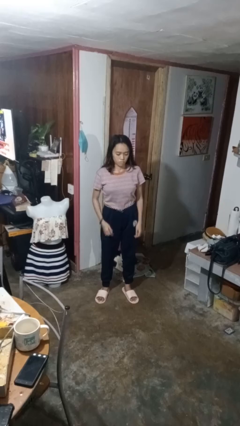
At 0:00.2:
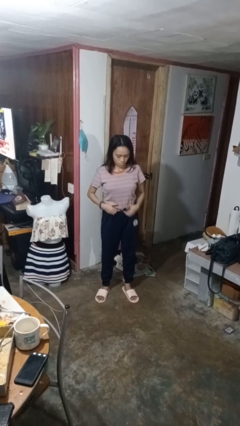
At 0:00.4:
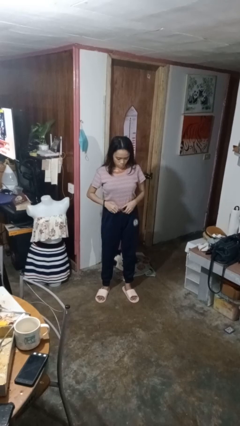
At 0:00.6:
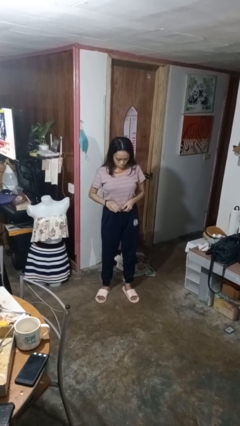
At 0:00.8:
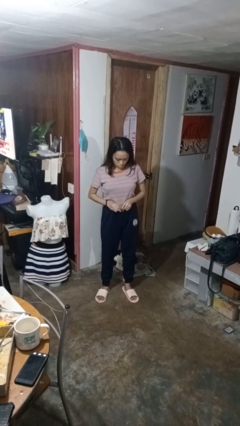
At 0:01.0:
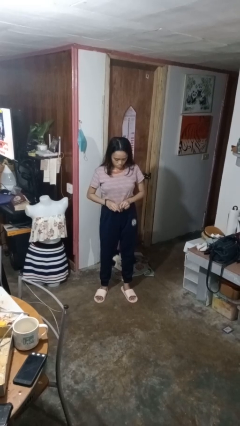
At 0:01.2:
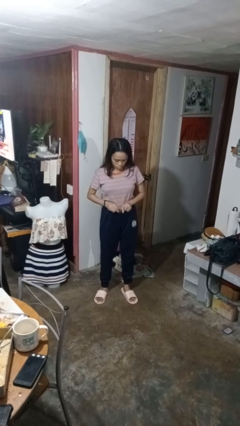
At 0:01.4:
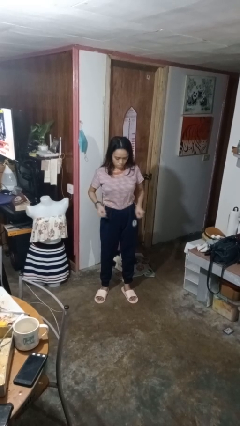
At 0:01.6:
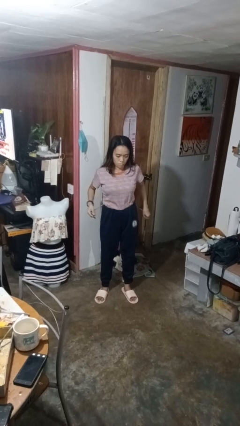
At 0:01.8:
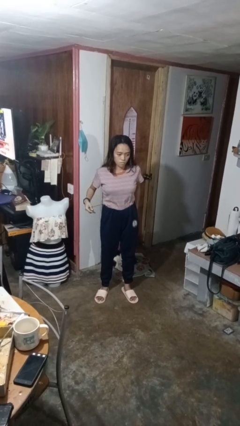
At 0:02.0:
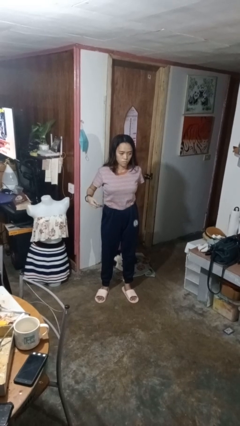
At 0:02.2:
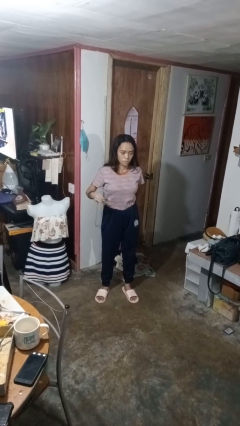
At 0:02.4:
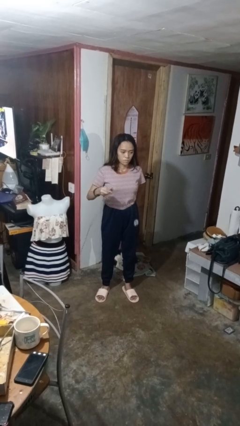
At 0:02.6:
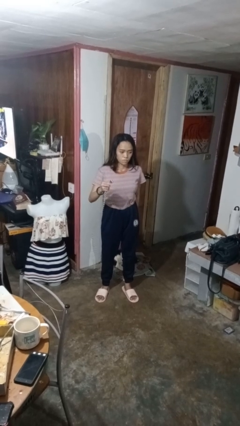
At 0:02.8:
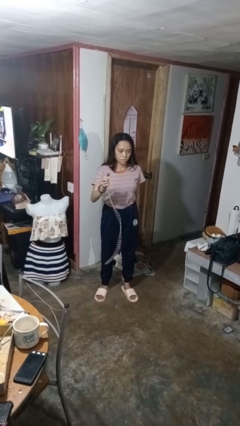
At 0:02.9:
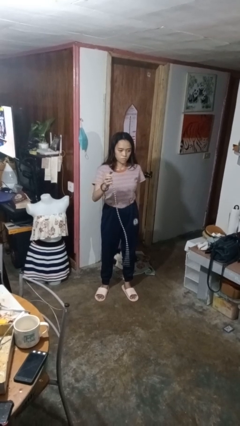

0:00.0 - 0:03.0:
person takes off belt

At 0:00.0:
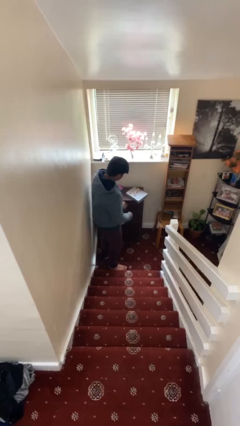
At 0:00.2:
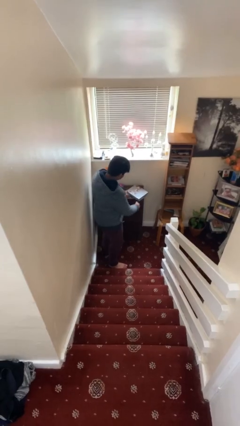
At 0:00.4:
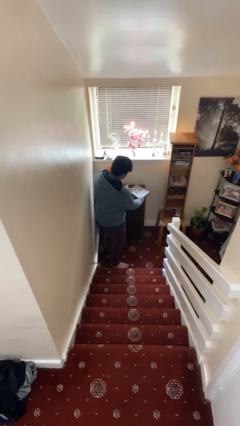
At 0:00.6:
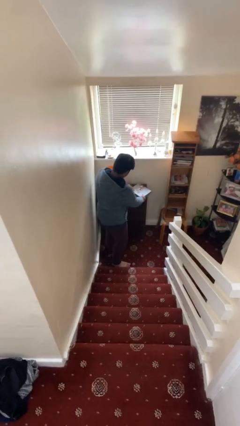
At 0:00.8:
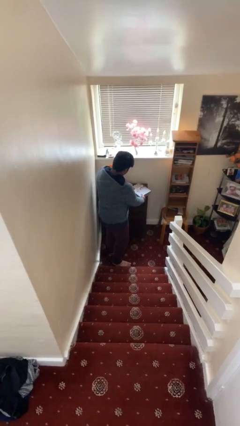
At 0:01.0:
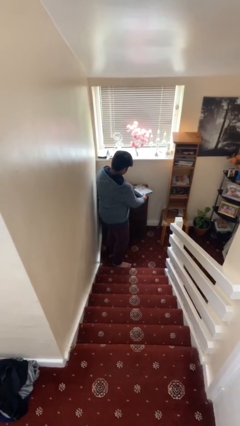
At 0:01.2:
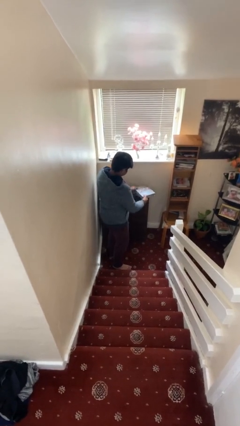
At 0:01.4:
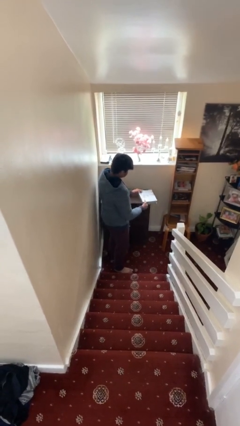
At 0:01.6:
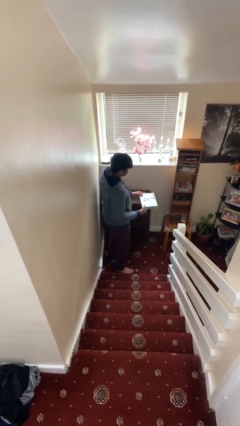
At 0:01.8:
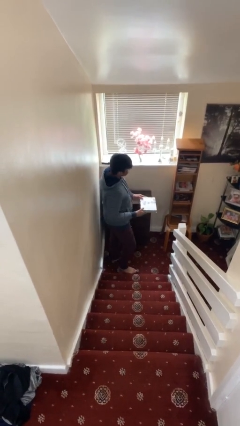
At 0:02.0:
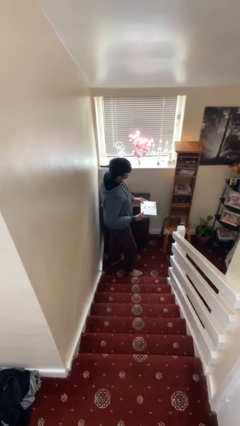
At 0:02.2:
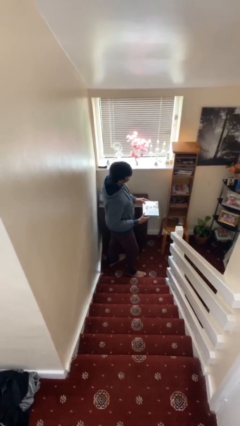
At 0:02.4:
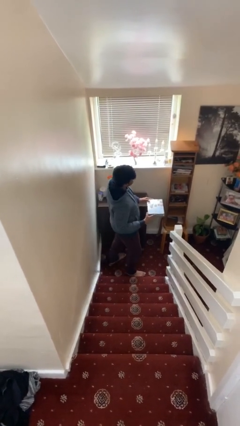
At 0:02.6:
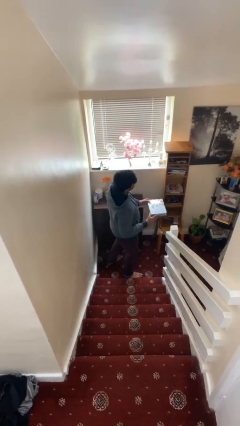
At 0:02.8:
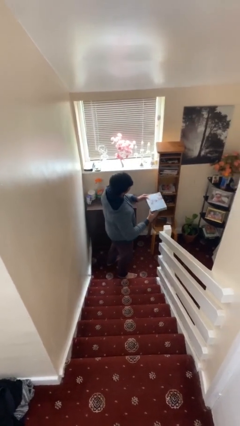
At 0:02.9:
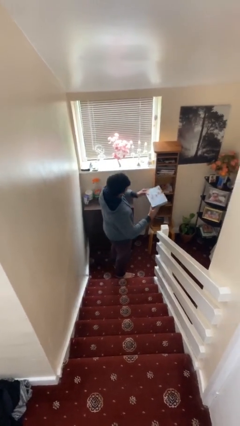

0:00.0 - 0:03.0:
person picks up object from table

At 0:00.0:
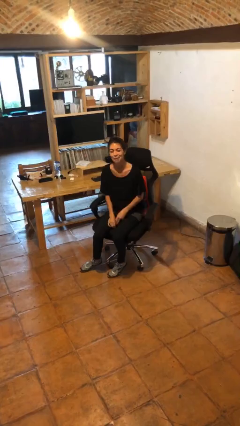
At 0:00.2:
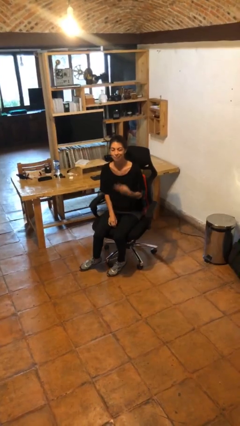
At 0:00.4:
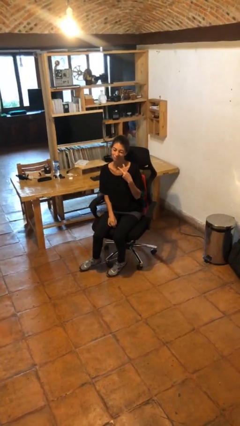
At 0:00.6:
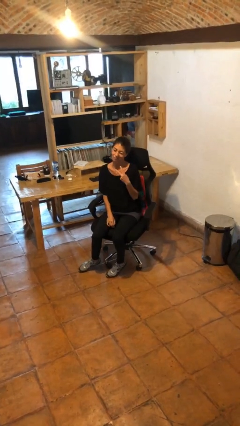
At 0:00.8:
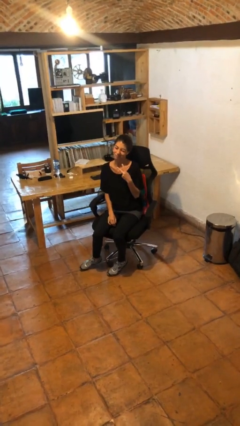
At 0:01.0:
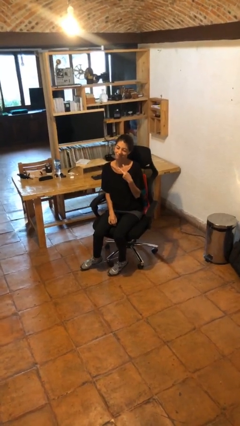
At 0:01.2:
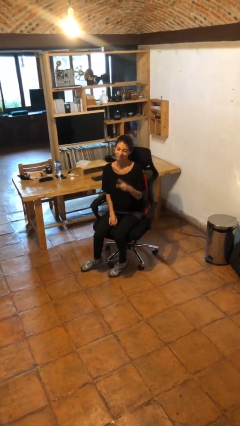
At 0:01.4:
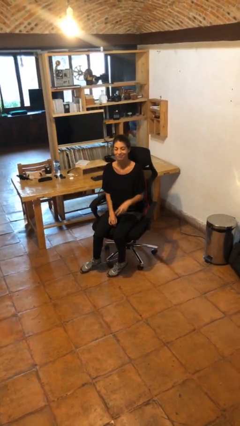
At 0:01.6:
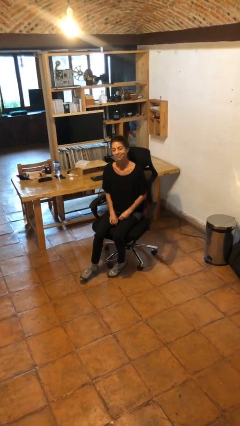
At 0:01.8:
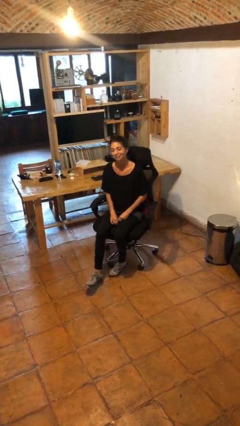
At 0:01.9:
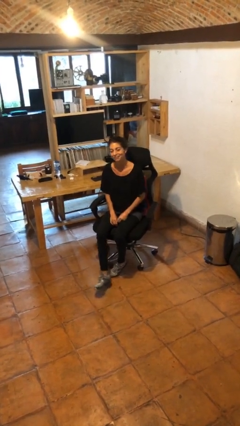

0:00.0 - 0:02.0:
person gestures peace

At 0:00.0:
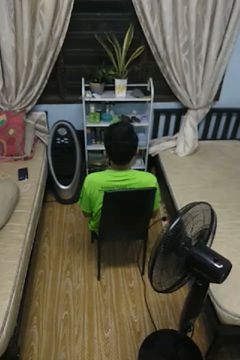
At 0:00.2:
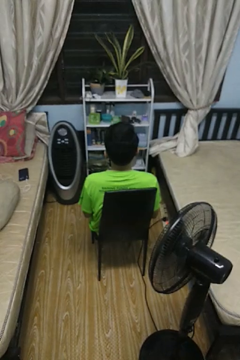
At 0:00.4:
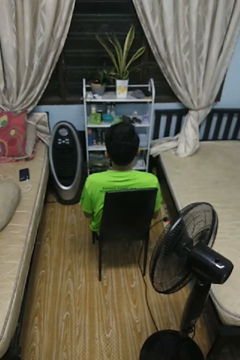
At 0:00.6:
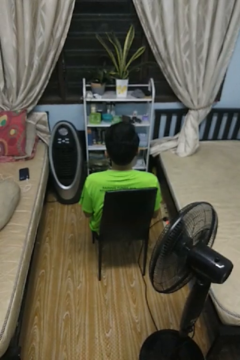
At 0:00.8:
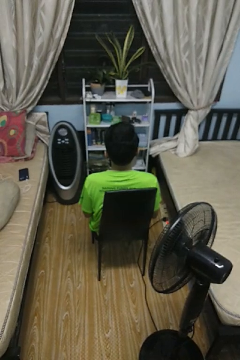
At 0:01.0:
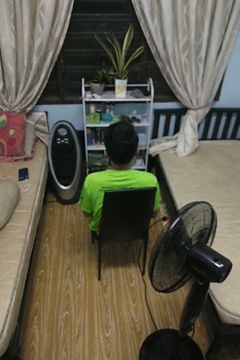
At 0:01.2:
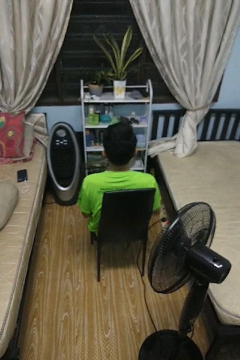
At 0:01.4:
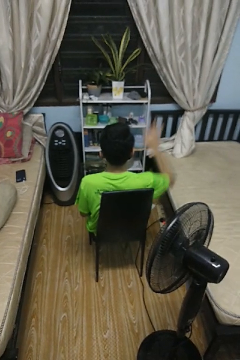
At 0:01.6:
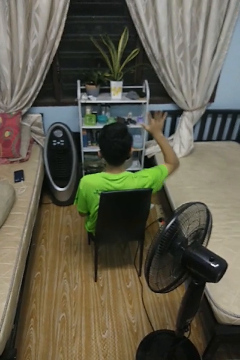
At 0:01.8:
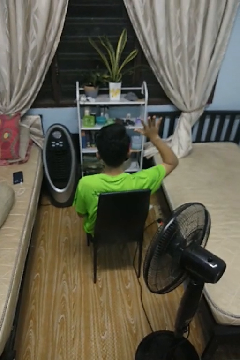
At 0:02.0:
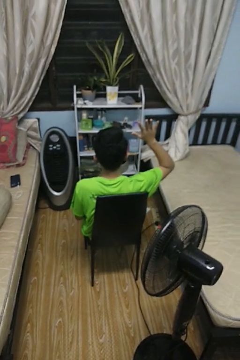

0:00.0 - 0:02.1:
person gestures number five

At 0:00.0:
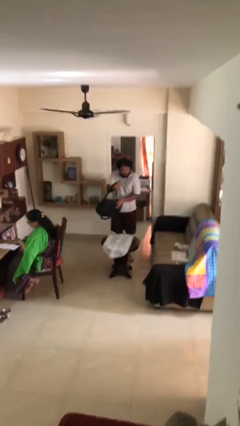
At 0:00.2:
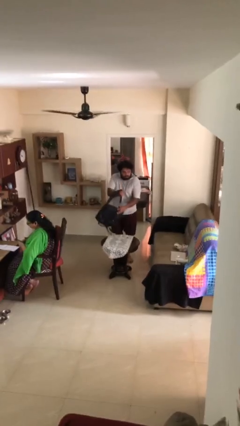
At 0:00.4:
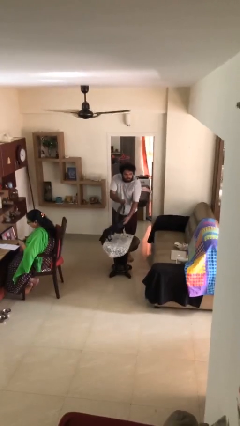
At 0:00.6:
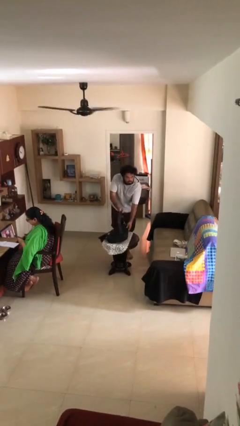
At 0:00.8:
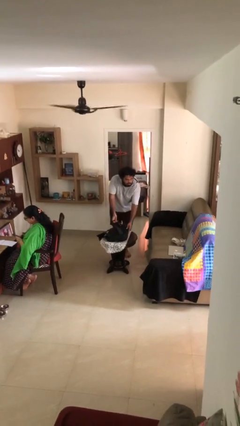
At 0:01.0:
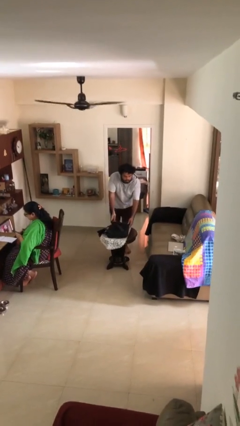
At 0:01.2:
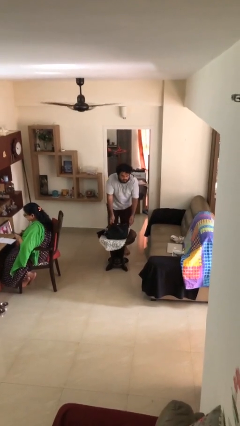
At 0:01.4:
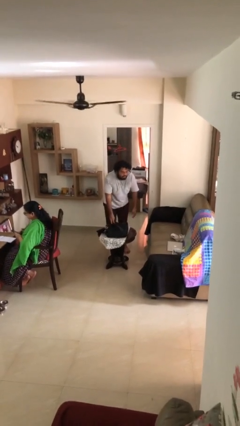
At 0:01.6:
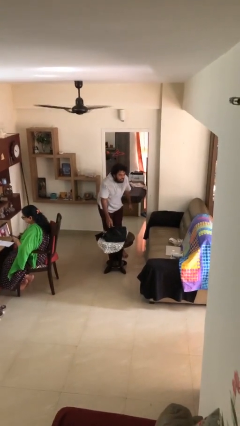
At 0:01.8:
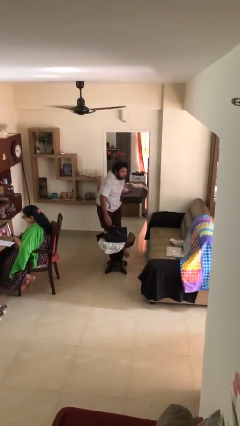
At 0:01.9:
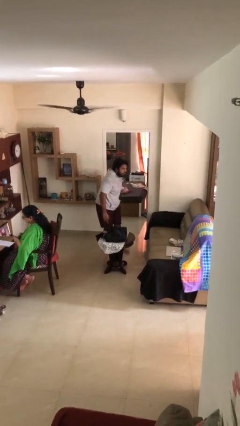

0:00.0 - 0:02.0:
person puts down object on table

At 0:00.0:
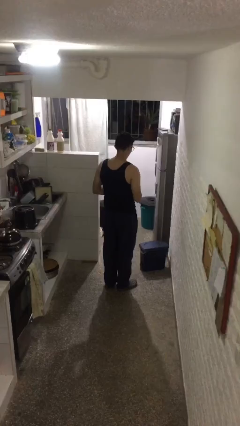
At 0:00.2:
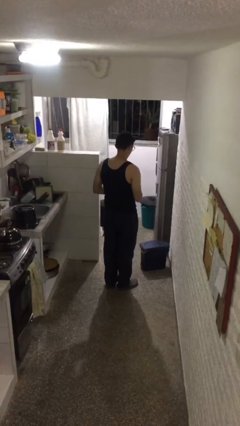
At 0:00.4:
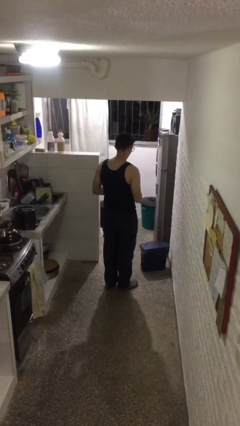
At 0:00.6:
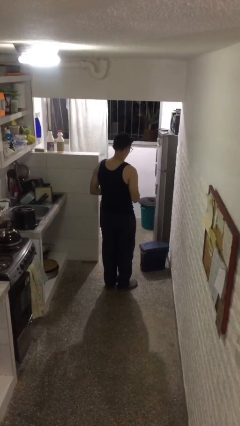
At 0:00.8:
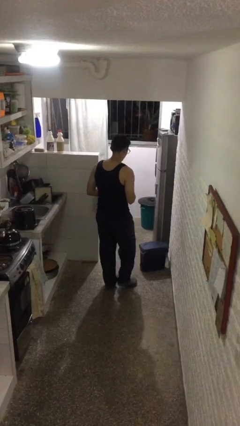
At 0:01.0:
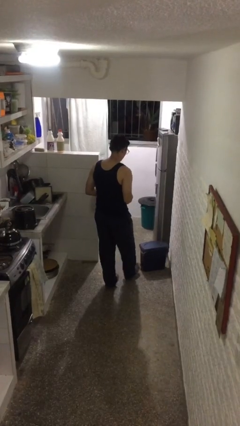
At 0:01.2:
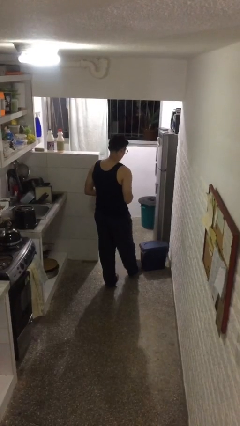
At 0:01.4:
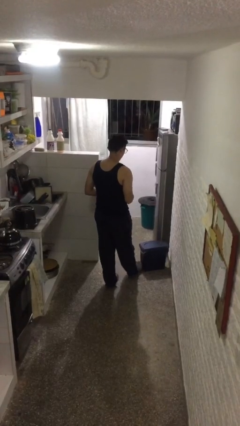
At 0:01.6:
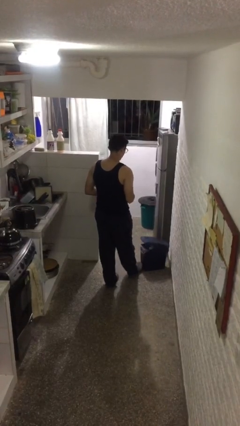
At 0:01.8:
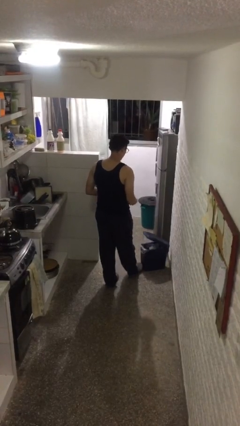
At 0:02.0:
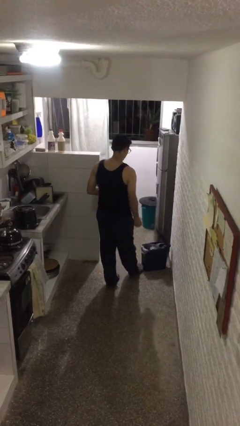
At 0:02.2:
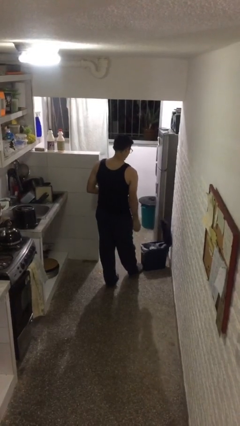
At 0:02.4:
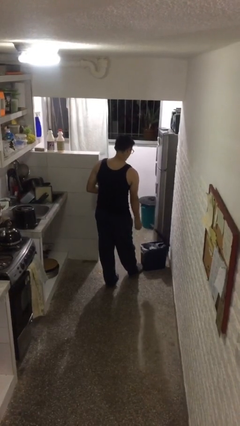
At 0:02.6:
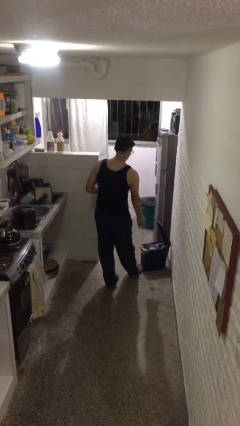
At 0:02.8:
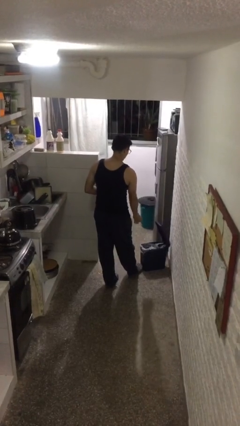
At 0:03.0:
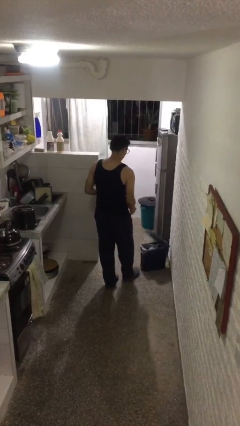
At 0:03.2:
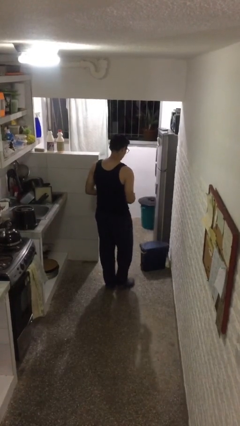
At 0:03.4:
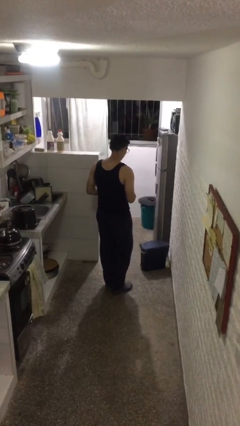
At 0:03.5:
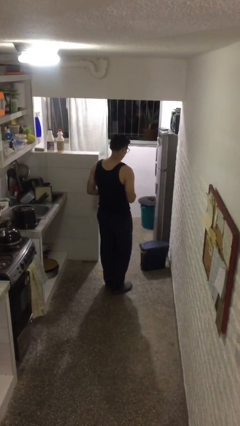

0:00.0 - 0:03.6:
person discards trash

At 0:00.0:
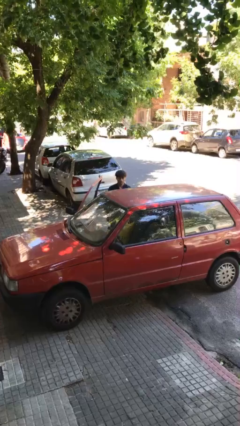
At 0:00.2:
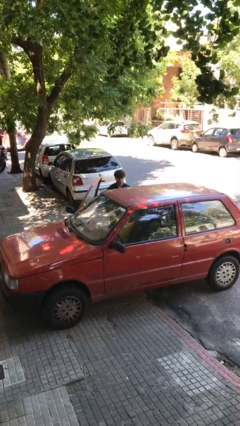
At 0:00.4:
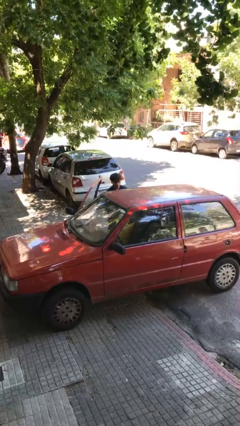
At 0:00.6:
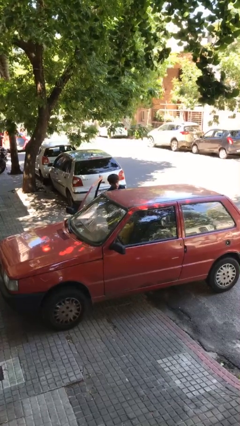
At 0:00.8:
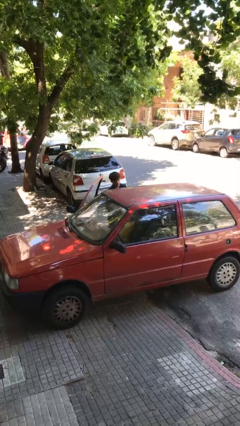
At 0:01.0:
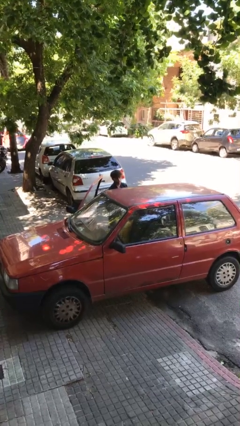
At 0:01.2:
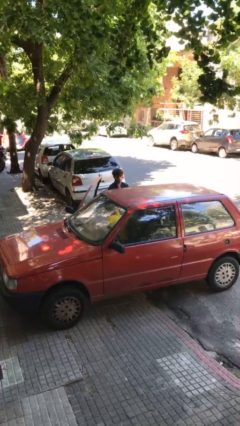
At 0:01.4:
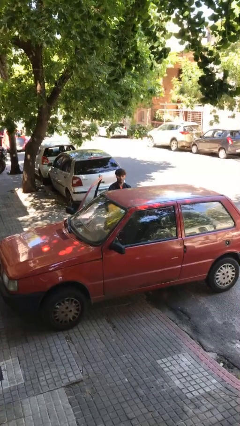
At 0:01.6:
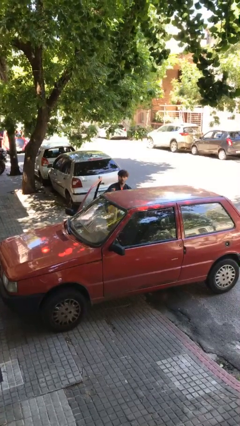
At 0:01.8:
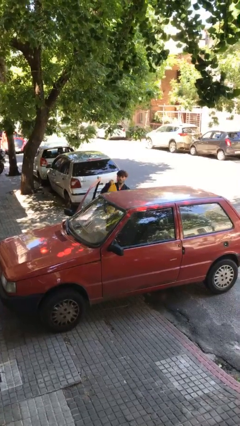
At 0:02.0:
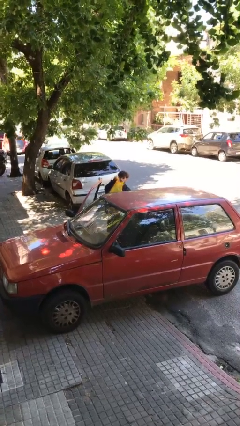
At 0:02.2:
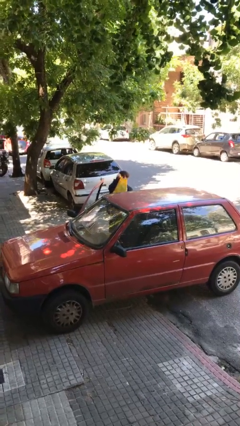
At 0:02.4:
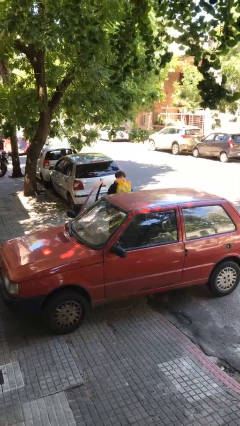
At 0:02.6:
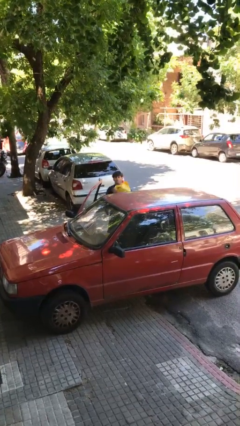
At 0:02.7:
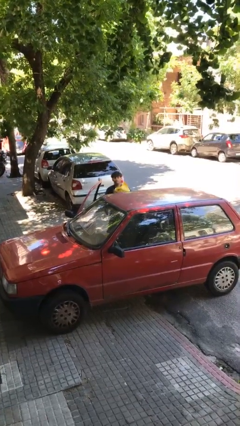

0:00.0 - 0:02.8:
person unloads car
